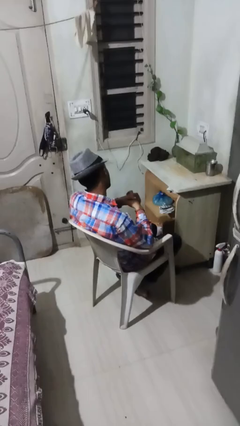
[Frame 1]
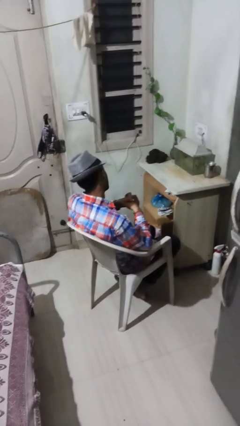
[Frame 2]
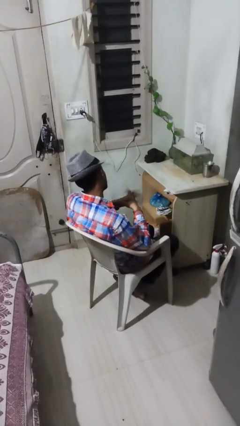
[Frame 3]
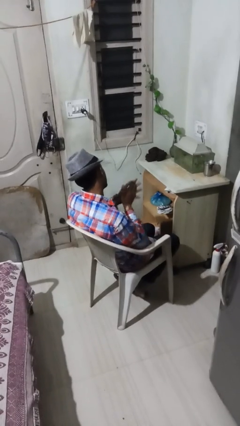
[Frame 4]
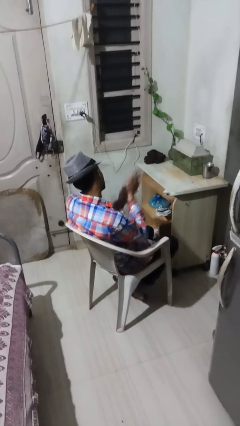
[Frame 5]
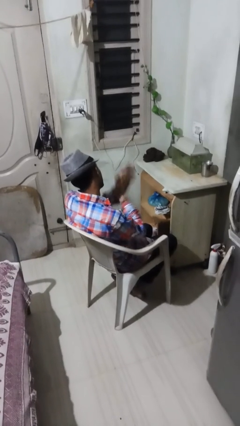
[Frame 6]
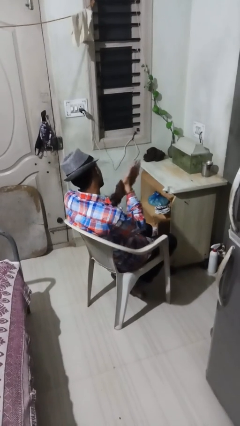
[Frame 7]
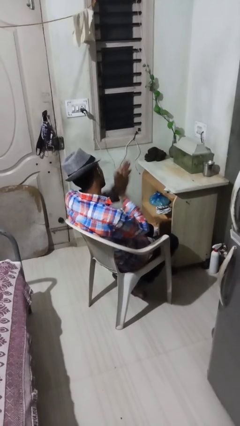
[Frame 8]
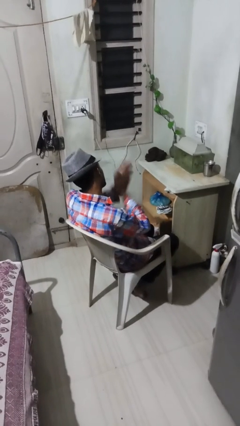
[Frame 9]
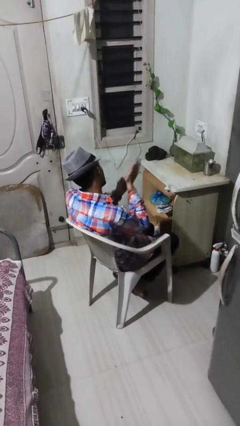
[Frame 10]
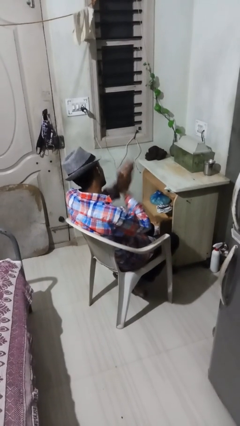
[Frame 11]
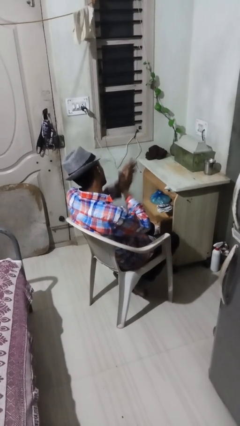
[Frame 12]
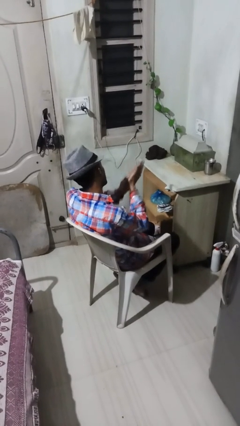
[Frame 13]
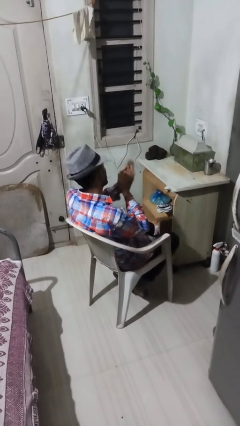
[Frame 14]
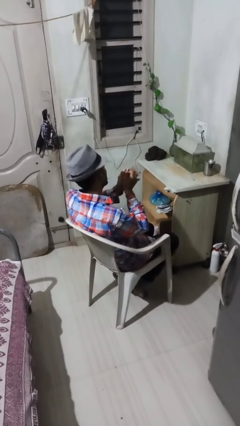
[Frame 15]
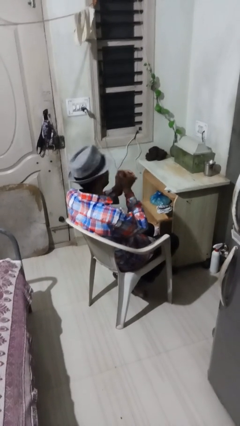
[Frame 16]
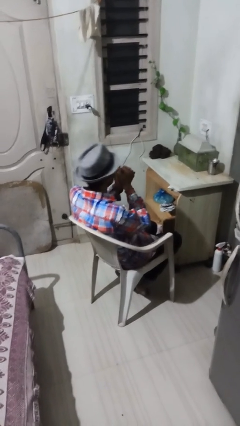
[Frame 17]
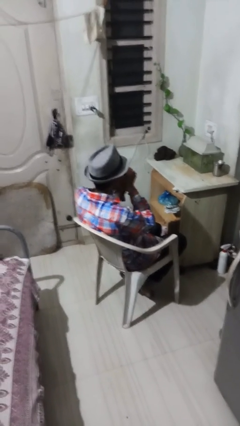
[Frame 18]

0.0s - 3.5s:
person blows into hands

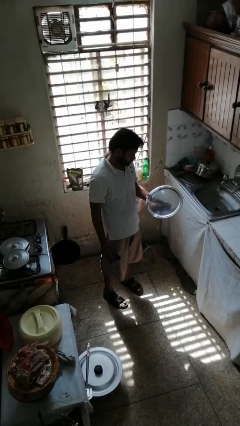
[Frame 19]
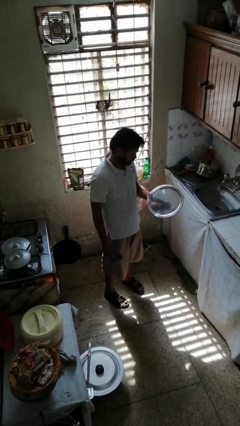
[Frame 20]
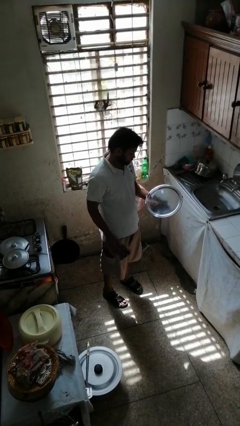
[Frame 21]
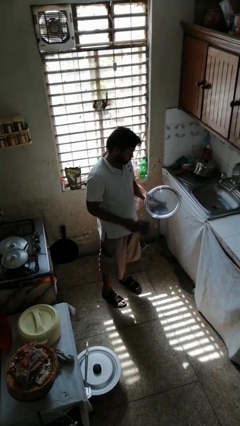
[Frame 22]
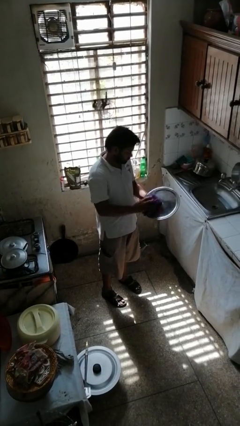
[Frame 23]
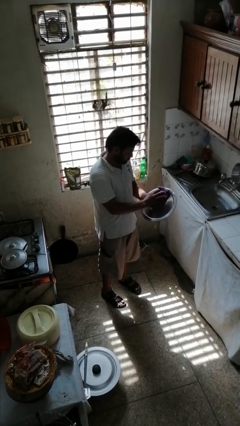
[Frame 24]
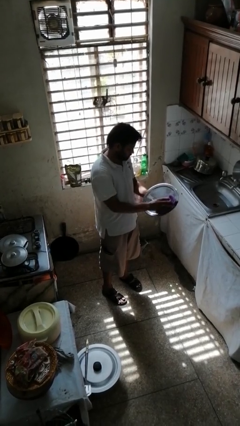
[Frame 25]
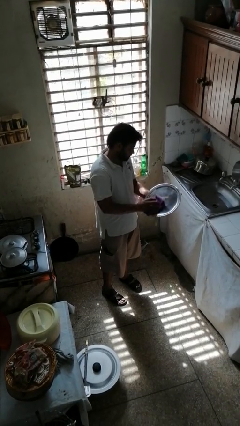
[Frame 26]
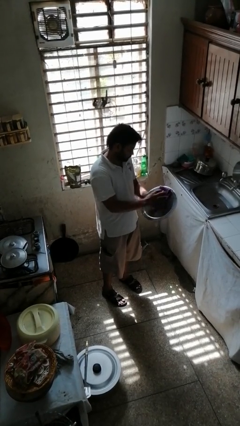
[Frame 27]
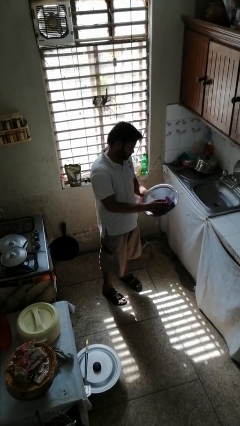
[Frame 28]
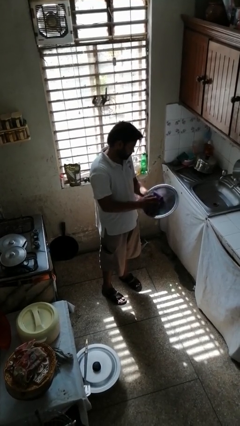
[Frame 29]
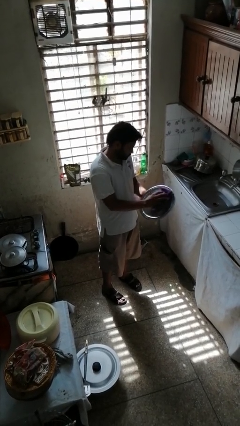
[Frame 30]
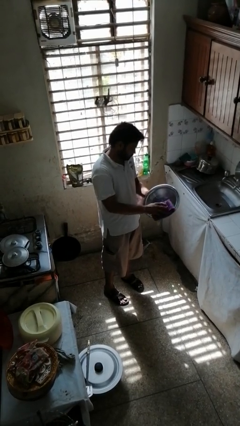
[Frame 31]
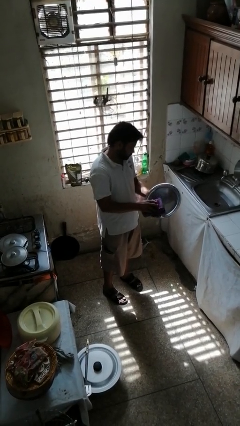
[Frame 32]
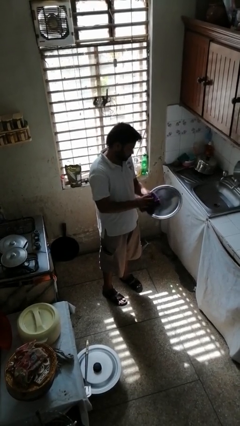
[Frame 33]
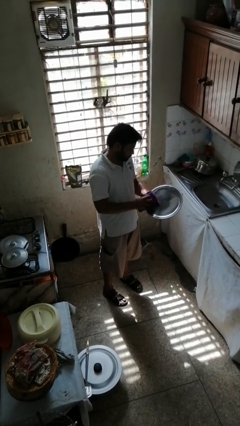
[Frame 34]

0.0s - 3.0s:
person dries dish

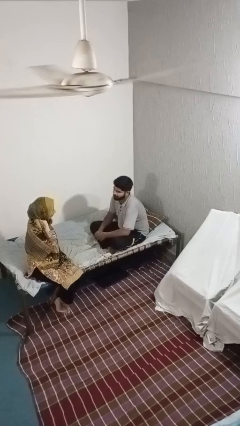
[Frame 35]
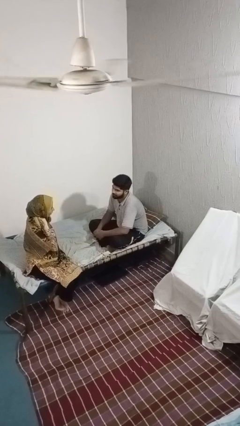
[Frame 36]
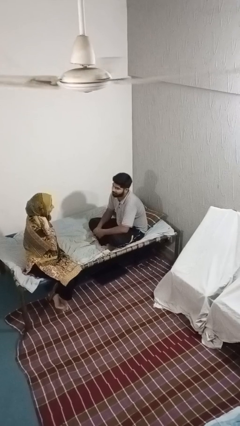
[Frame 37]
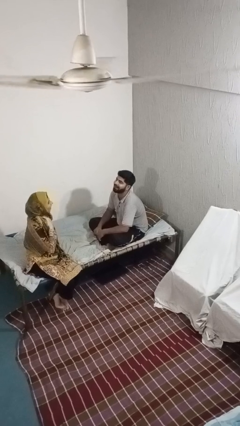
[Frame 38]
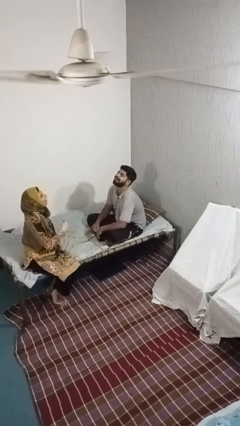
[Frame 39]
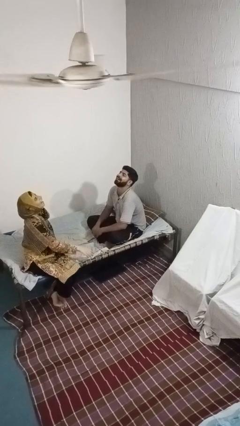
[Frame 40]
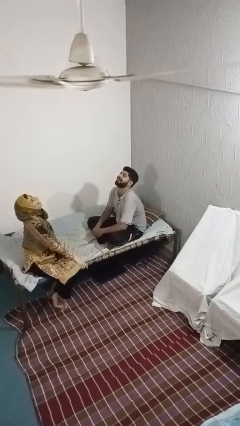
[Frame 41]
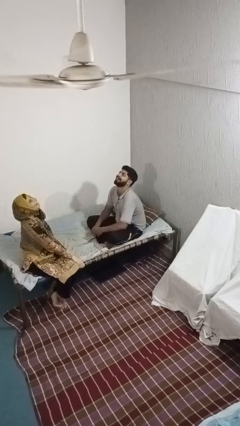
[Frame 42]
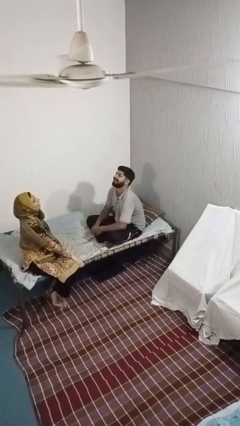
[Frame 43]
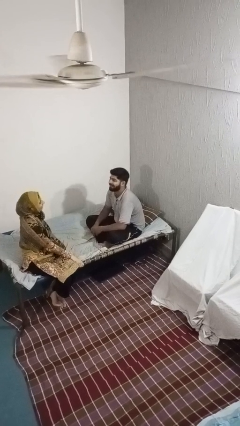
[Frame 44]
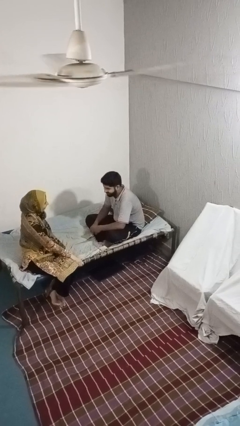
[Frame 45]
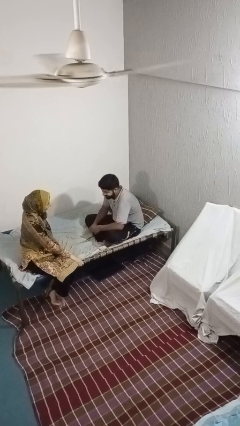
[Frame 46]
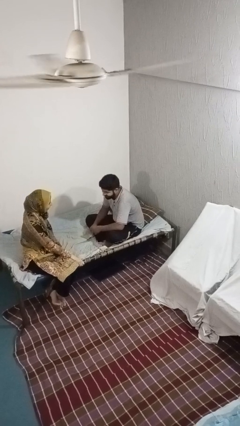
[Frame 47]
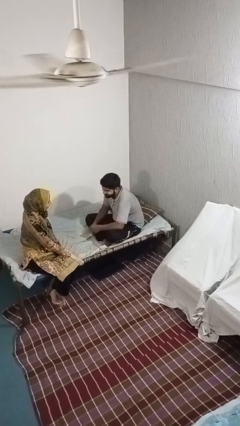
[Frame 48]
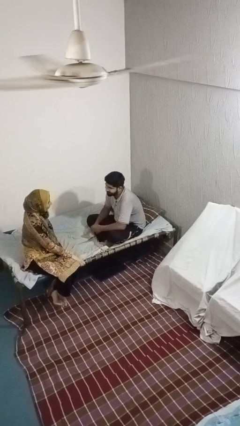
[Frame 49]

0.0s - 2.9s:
person laughs with person

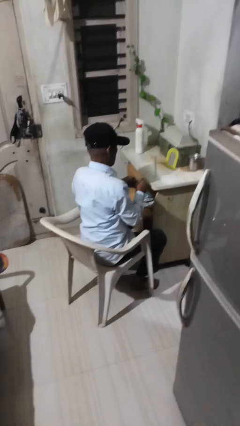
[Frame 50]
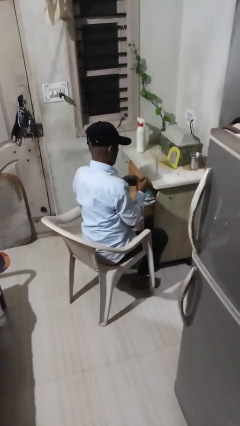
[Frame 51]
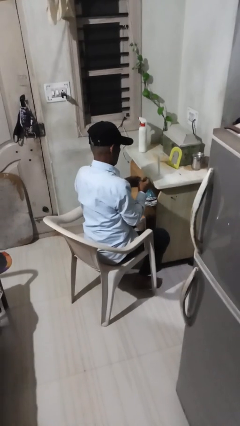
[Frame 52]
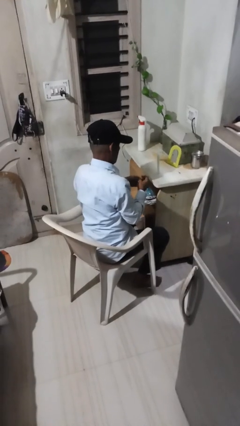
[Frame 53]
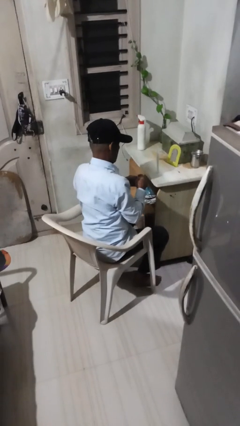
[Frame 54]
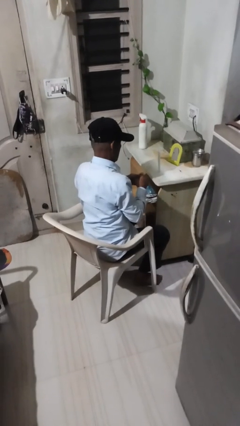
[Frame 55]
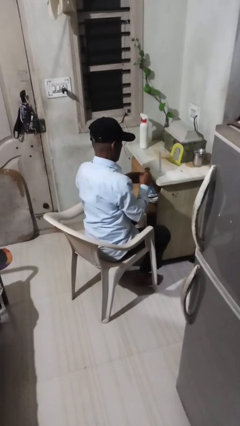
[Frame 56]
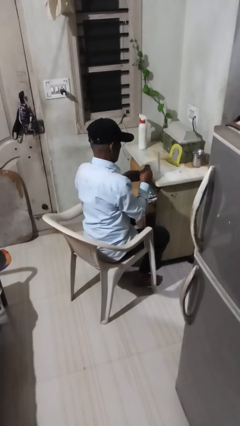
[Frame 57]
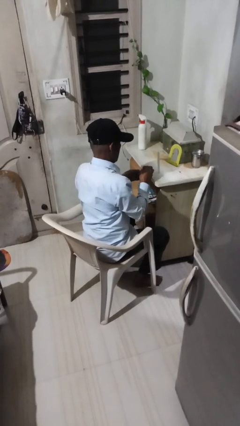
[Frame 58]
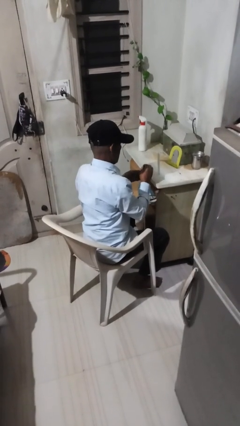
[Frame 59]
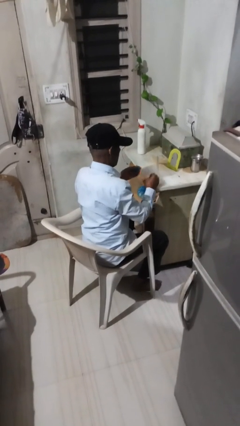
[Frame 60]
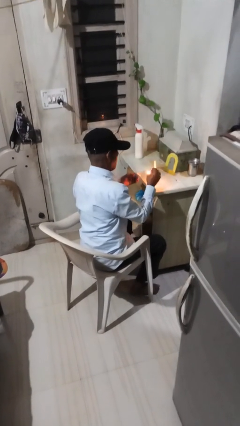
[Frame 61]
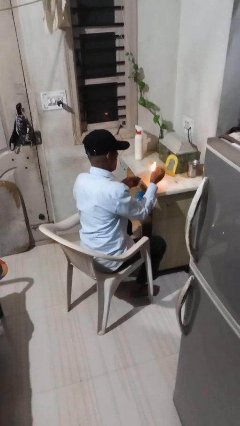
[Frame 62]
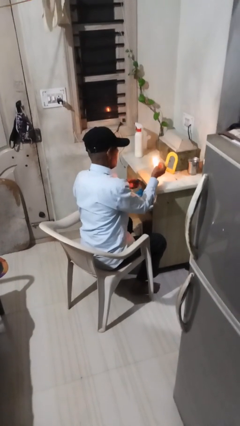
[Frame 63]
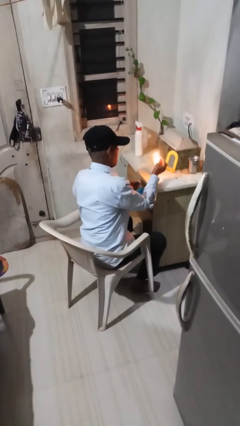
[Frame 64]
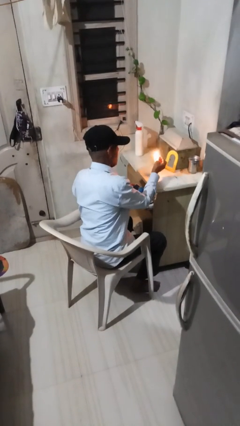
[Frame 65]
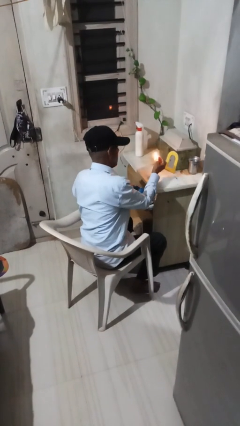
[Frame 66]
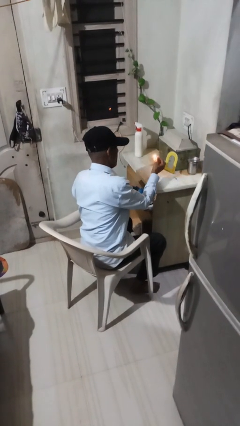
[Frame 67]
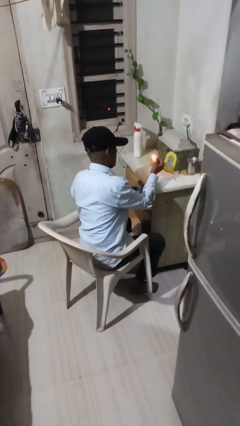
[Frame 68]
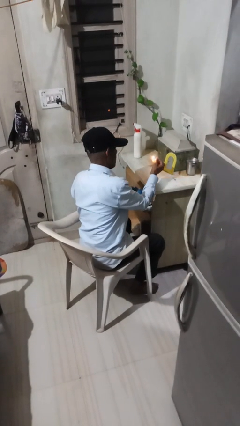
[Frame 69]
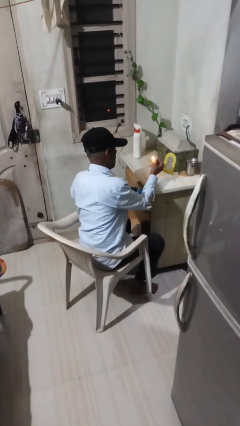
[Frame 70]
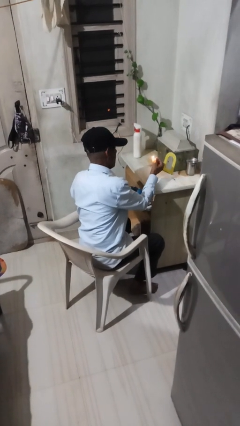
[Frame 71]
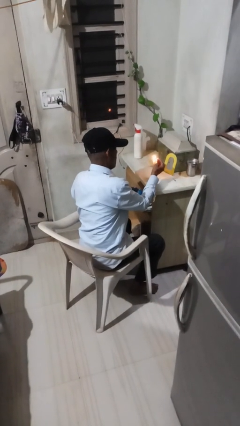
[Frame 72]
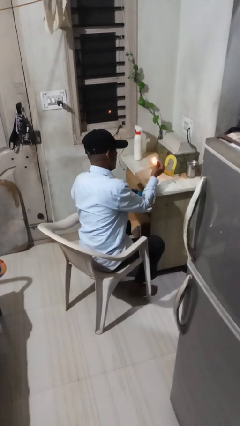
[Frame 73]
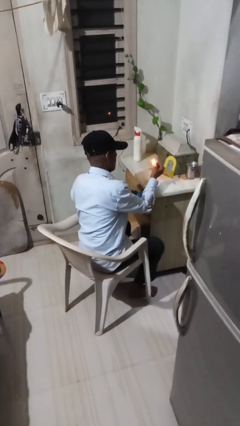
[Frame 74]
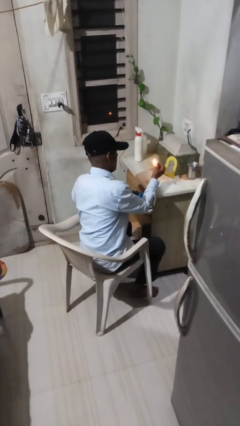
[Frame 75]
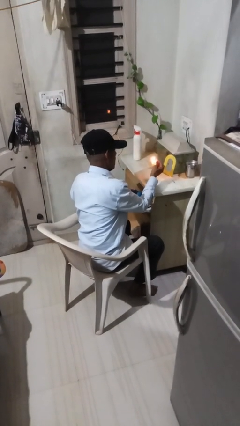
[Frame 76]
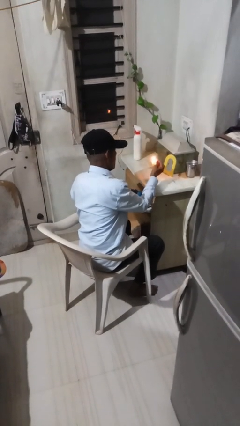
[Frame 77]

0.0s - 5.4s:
person lights candle

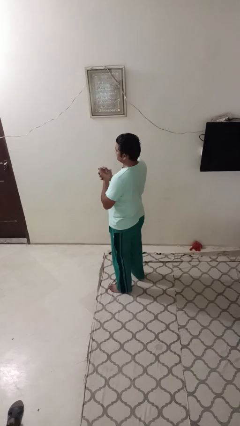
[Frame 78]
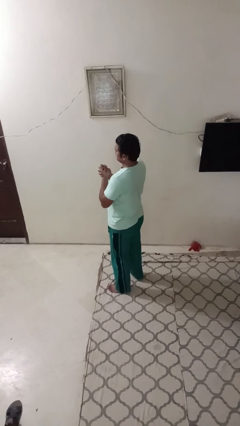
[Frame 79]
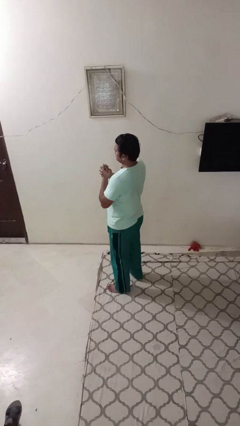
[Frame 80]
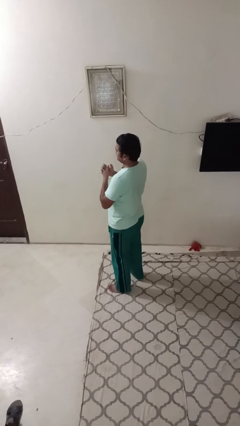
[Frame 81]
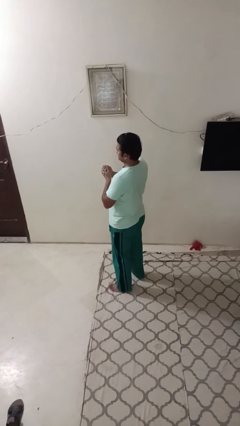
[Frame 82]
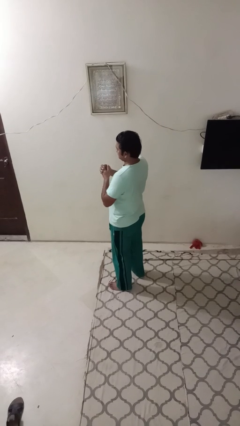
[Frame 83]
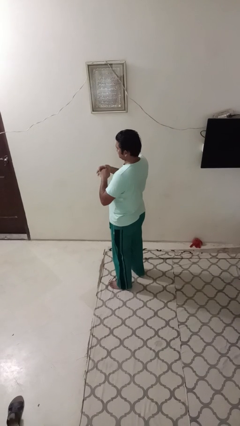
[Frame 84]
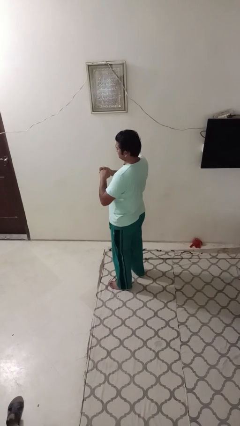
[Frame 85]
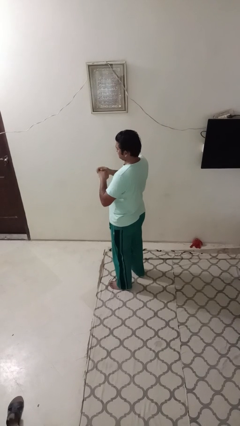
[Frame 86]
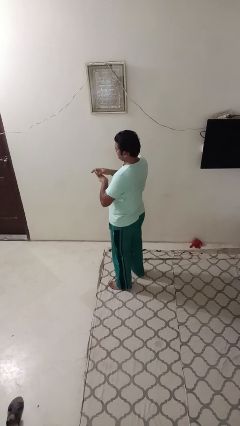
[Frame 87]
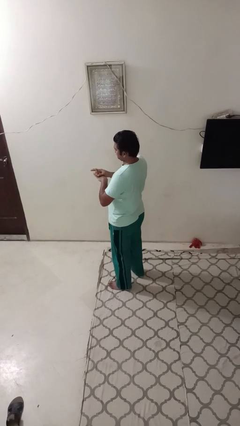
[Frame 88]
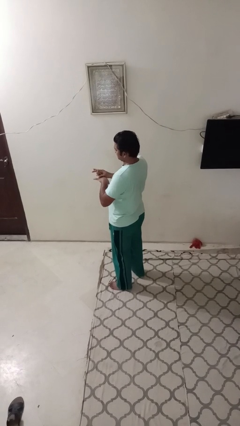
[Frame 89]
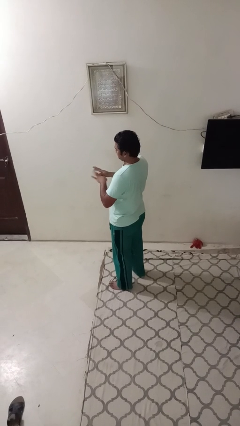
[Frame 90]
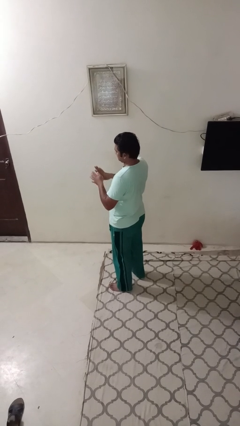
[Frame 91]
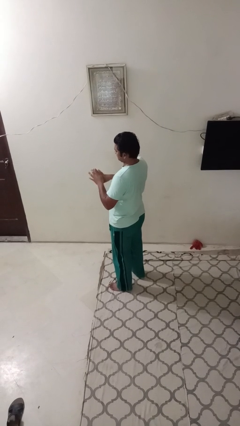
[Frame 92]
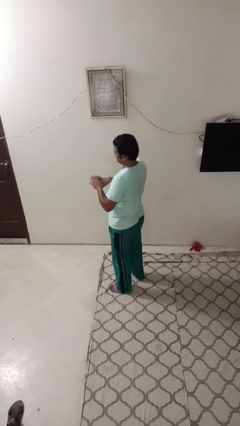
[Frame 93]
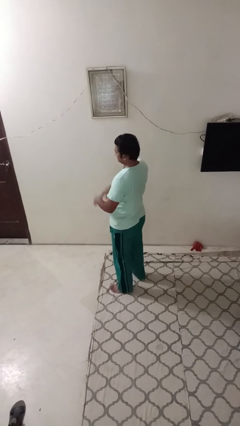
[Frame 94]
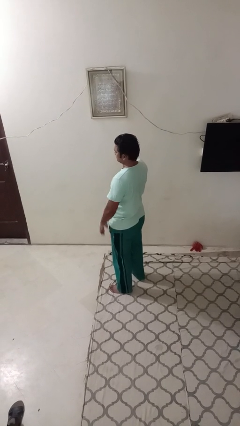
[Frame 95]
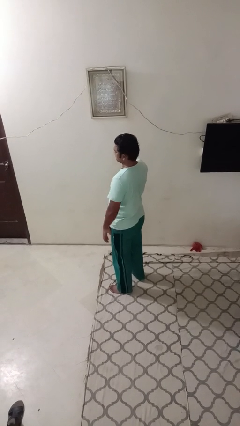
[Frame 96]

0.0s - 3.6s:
person cracks knuckles
